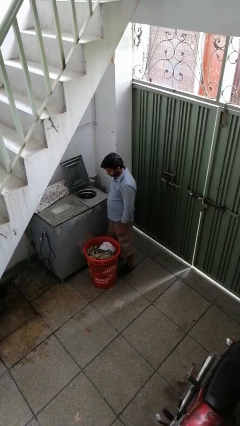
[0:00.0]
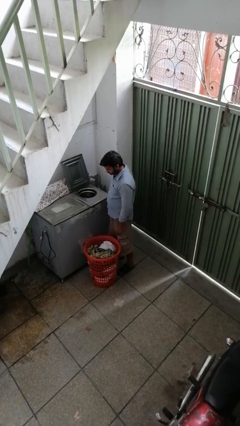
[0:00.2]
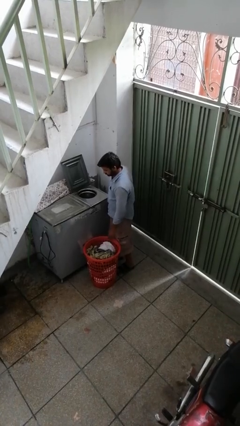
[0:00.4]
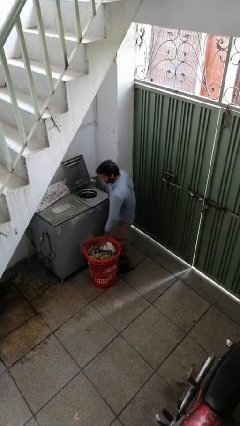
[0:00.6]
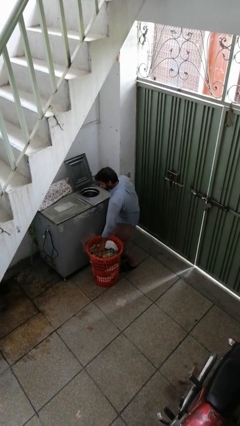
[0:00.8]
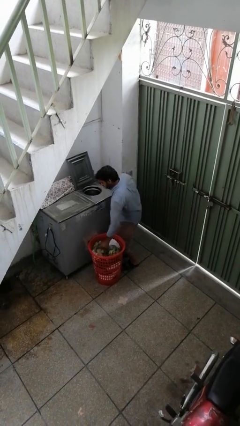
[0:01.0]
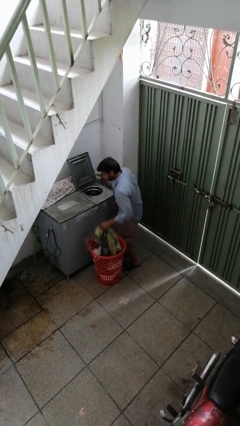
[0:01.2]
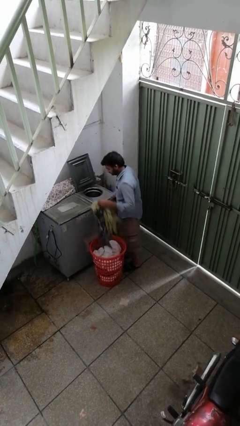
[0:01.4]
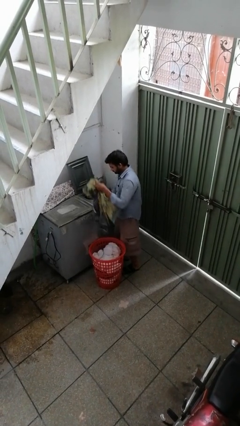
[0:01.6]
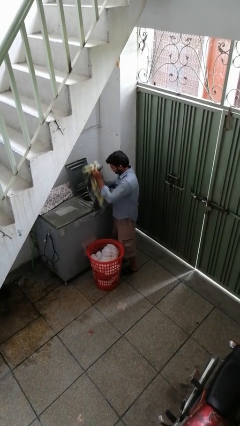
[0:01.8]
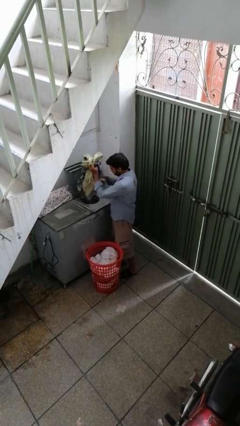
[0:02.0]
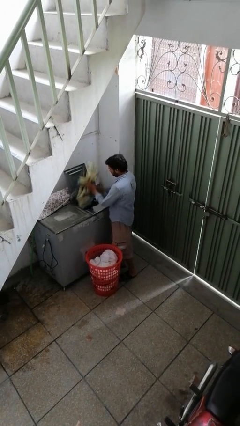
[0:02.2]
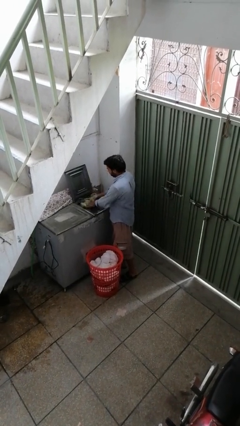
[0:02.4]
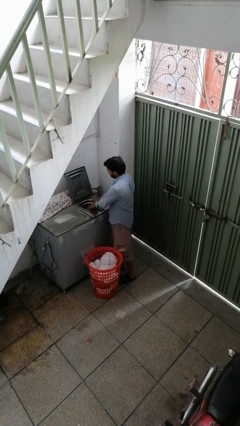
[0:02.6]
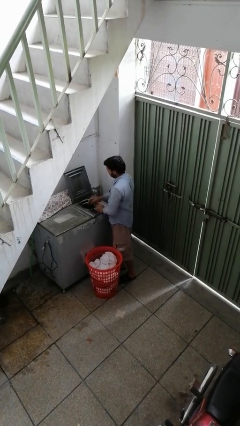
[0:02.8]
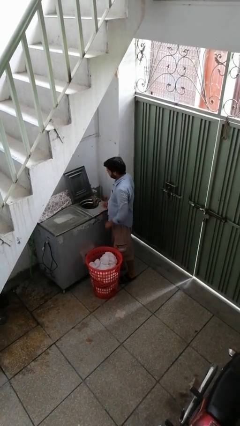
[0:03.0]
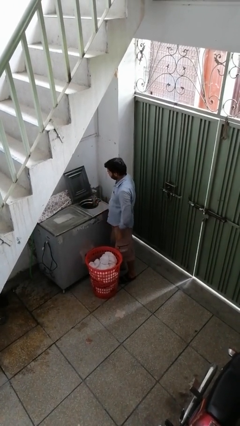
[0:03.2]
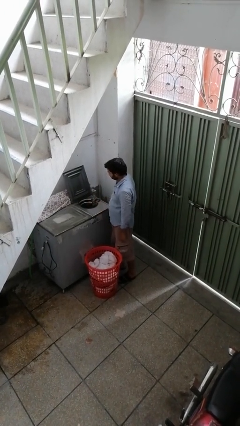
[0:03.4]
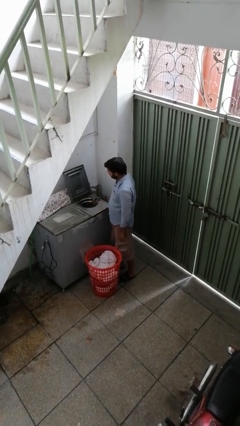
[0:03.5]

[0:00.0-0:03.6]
person loads dryer

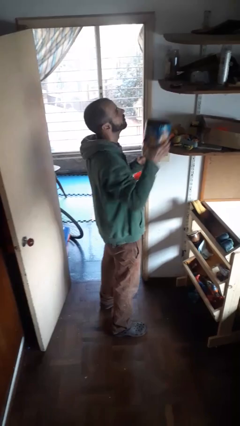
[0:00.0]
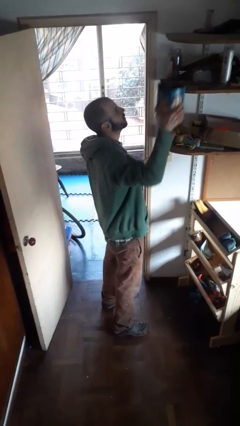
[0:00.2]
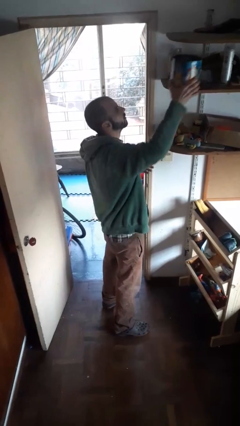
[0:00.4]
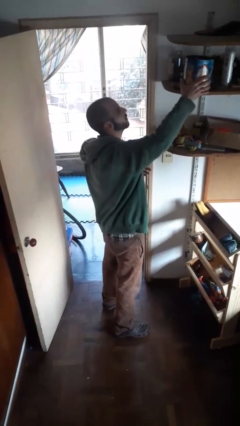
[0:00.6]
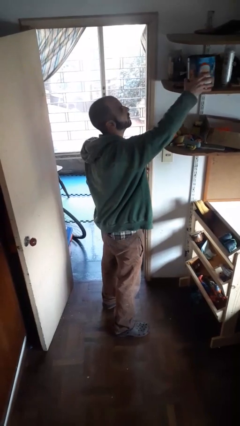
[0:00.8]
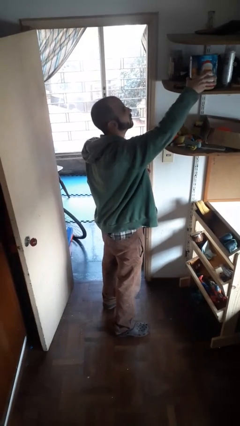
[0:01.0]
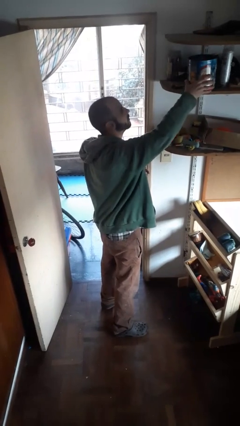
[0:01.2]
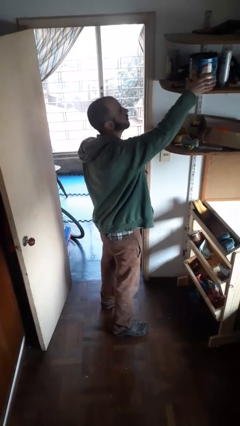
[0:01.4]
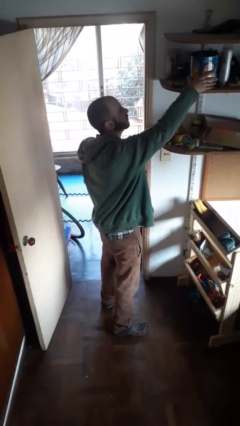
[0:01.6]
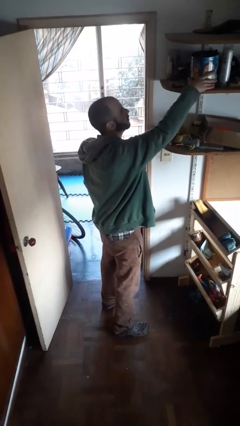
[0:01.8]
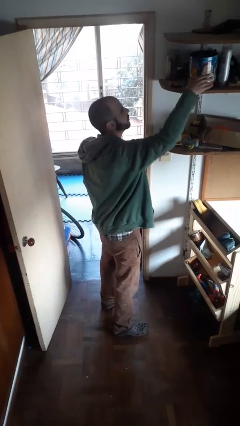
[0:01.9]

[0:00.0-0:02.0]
person puts down object on shelf

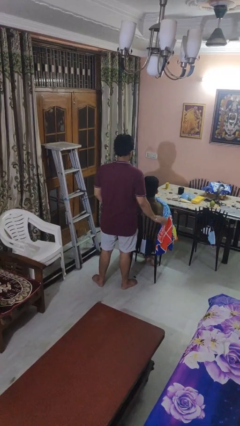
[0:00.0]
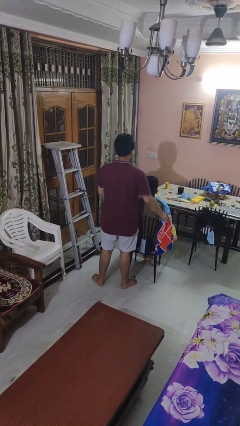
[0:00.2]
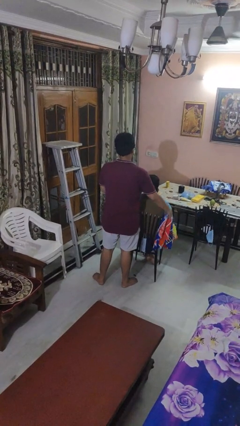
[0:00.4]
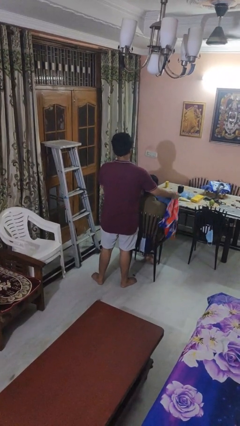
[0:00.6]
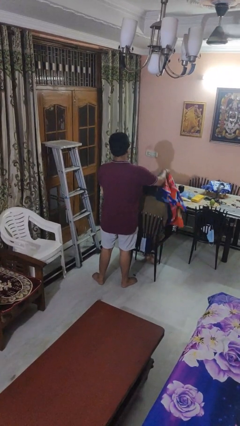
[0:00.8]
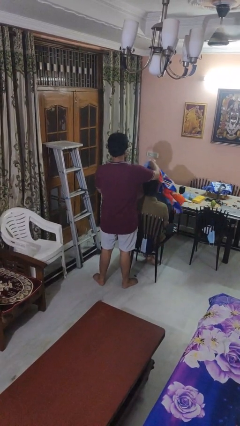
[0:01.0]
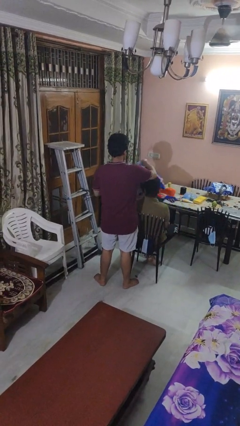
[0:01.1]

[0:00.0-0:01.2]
person uncovers friend with blanket

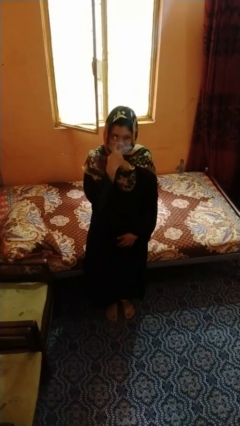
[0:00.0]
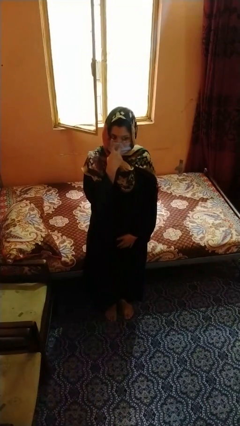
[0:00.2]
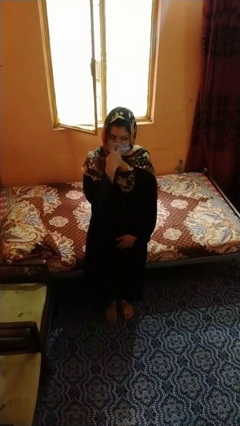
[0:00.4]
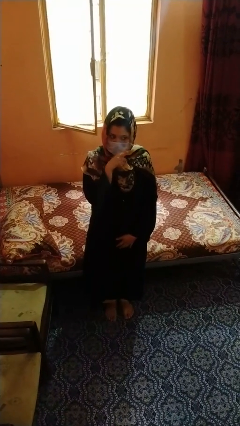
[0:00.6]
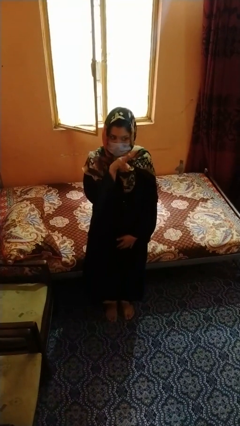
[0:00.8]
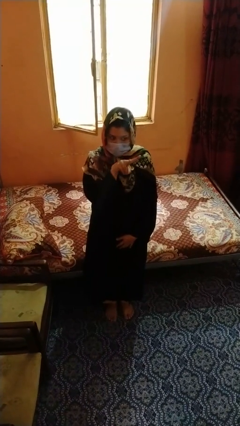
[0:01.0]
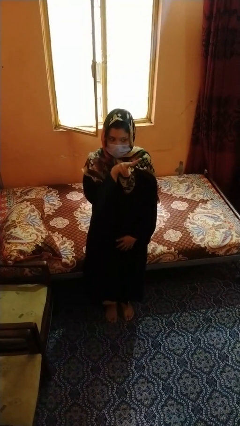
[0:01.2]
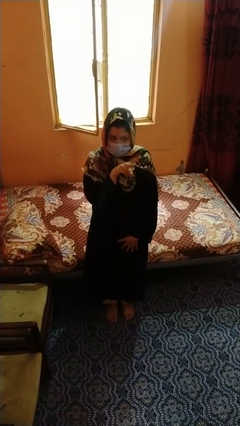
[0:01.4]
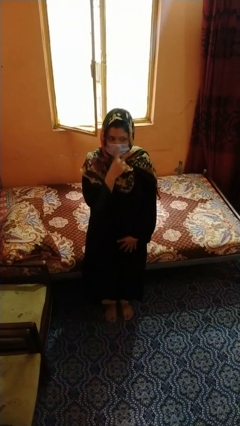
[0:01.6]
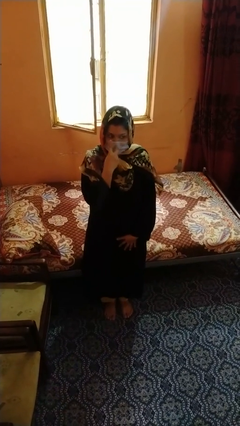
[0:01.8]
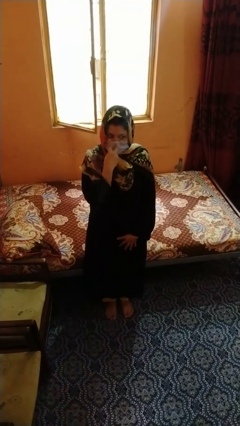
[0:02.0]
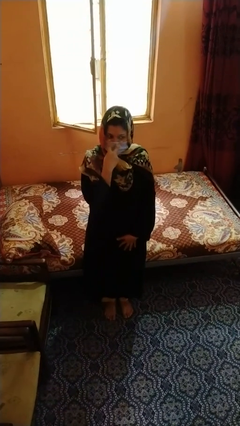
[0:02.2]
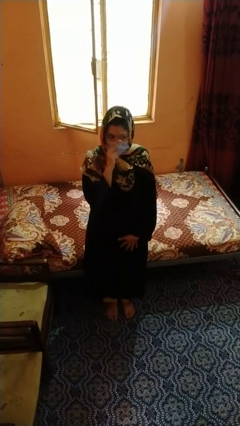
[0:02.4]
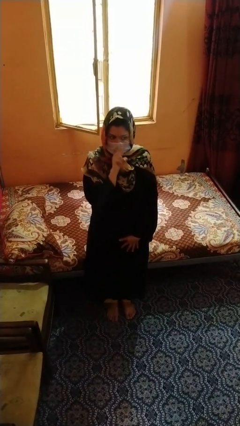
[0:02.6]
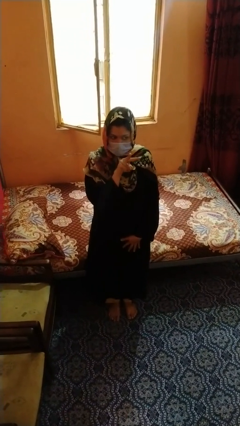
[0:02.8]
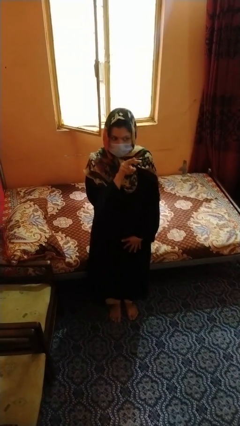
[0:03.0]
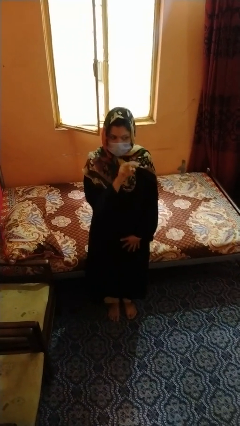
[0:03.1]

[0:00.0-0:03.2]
person gestures watch closely

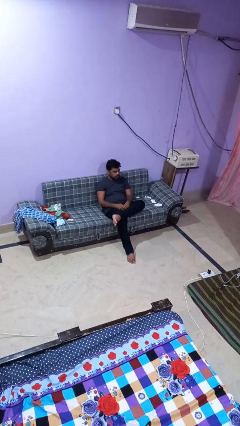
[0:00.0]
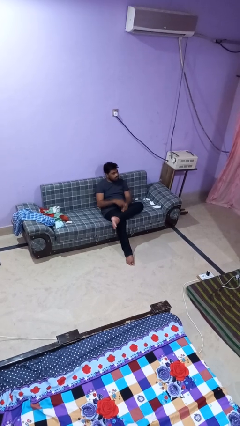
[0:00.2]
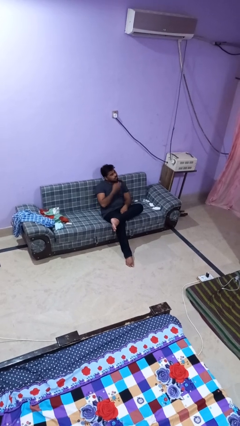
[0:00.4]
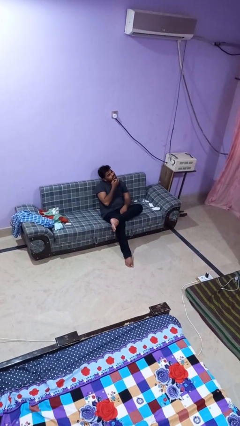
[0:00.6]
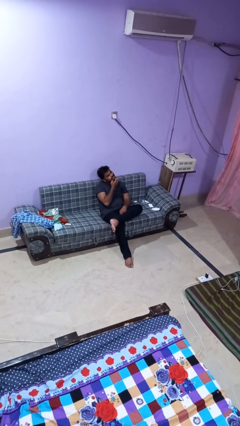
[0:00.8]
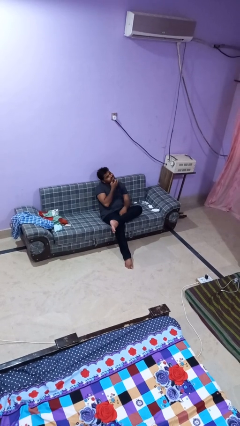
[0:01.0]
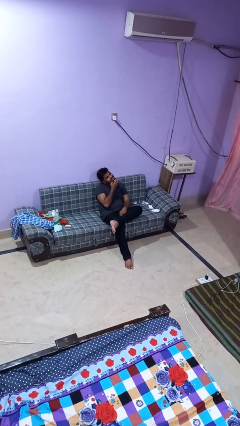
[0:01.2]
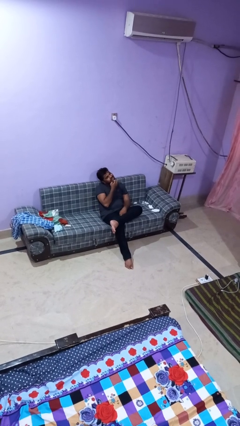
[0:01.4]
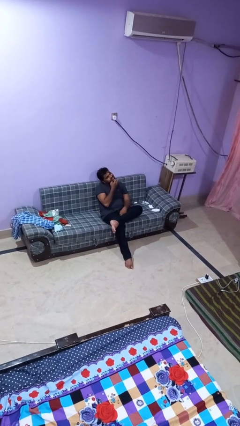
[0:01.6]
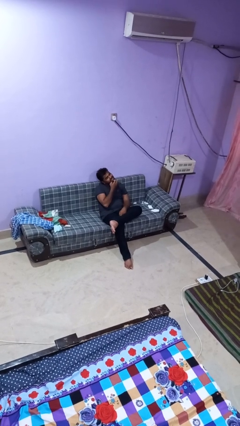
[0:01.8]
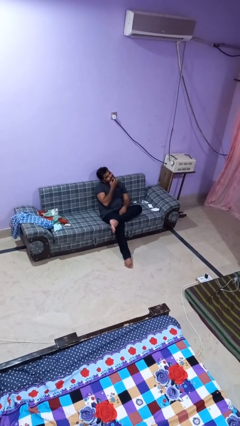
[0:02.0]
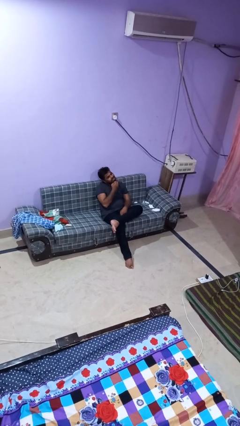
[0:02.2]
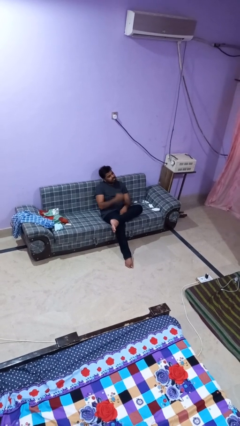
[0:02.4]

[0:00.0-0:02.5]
person strokes chin

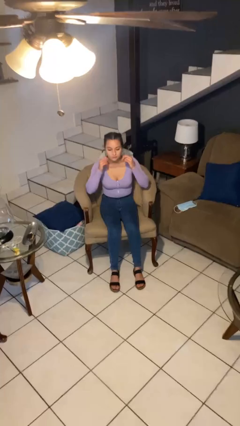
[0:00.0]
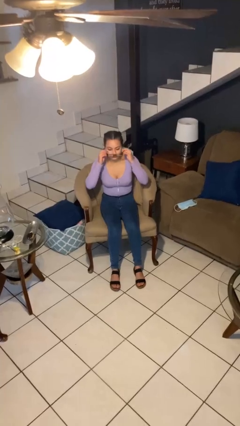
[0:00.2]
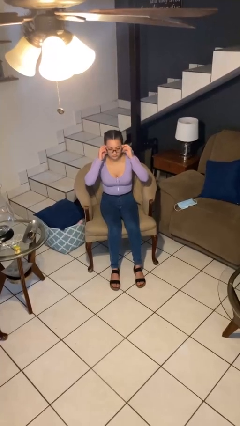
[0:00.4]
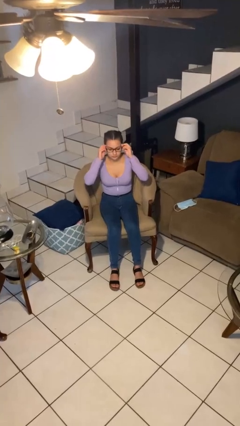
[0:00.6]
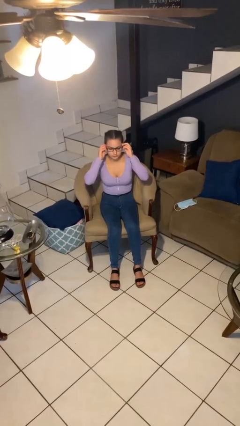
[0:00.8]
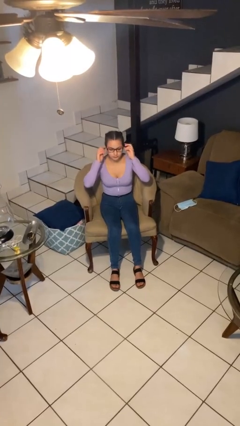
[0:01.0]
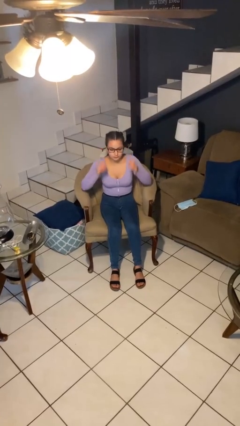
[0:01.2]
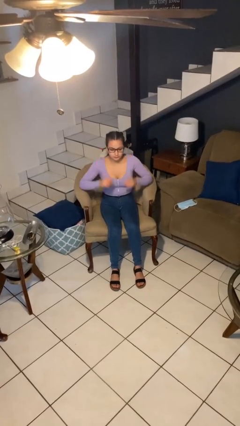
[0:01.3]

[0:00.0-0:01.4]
person puts on glasses

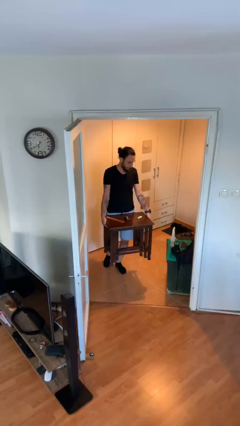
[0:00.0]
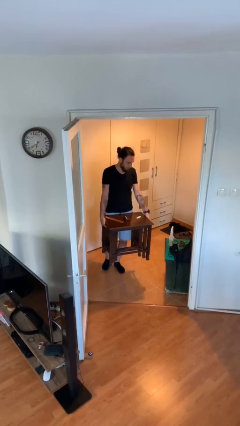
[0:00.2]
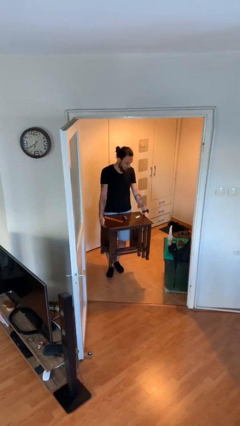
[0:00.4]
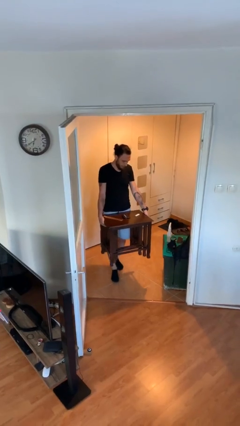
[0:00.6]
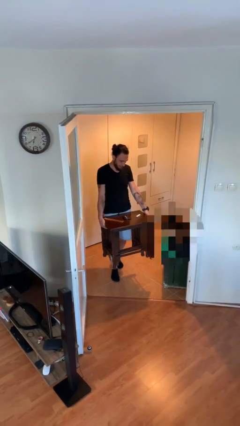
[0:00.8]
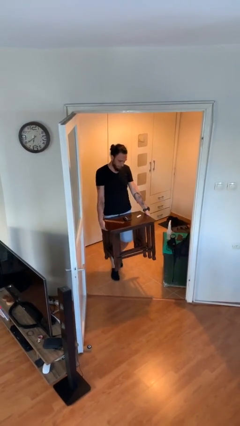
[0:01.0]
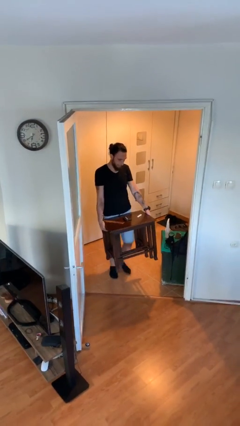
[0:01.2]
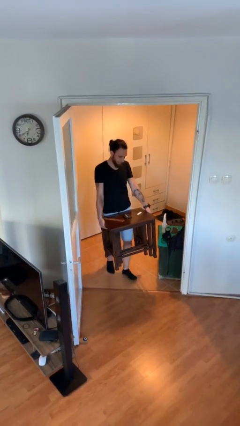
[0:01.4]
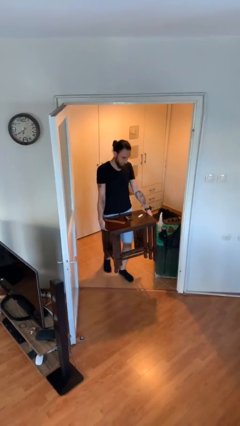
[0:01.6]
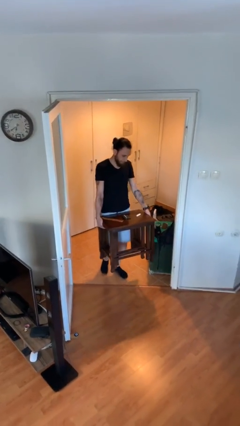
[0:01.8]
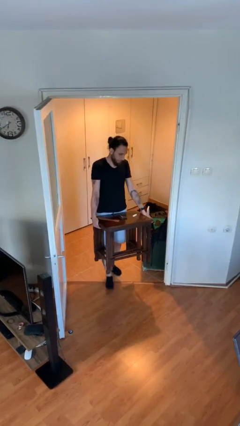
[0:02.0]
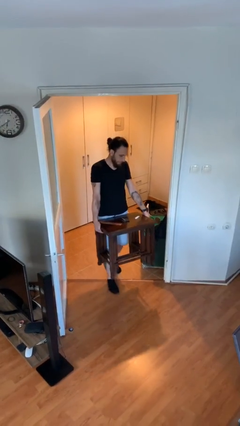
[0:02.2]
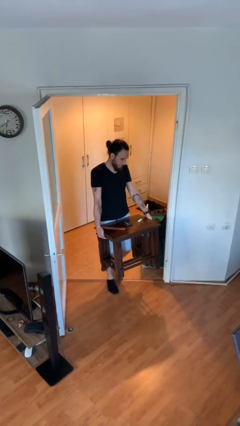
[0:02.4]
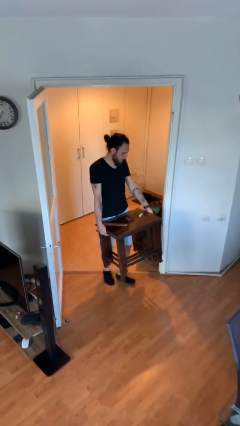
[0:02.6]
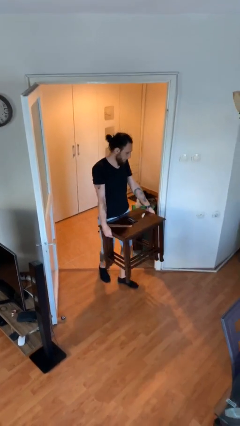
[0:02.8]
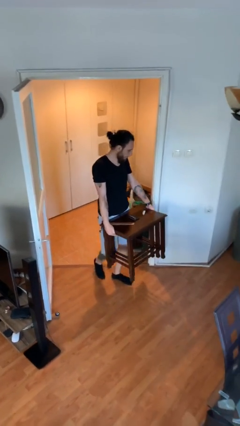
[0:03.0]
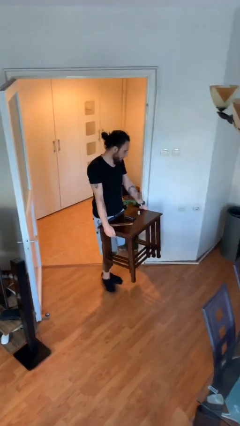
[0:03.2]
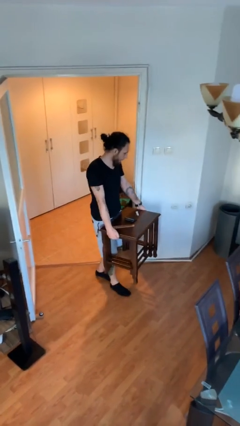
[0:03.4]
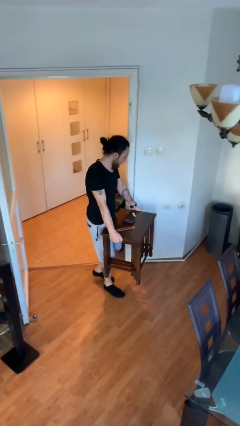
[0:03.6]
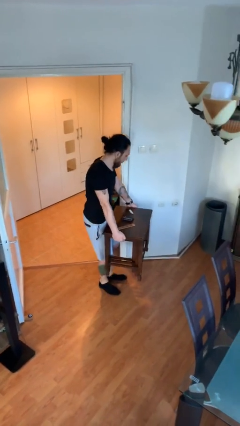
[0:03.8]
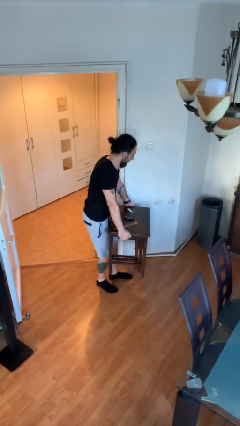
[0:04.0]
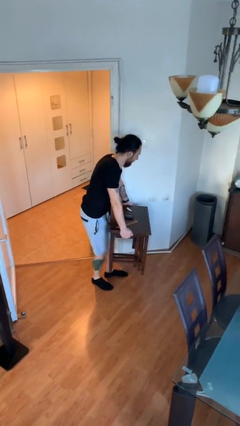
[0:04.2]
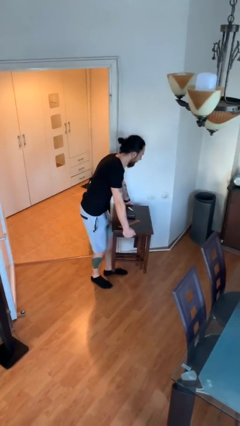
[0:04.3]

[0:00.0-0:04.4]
person carries heavy object
